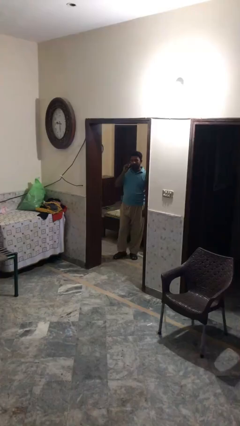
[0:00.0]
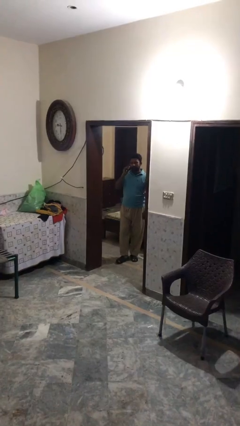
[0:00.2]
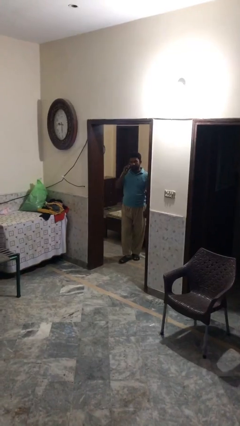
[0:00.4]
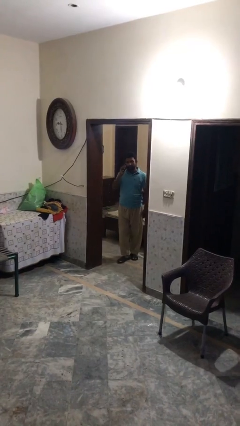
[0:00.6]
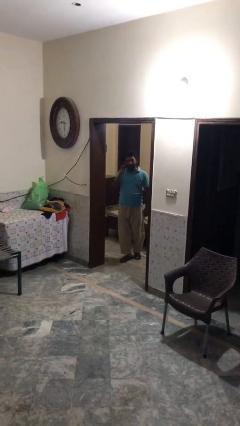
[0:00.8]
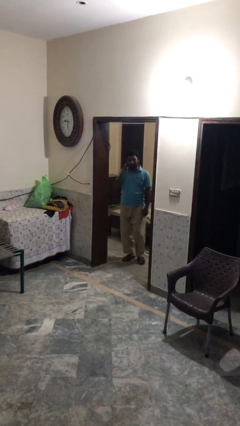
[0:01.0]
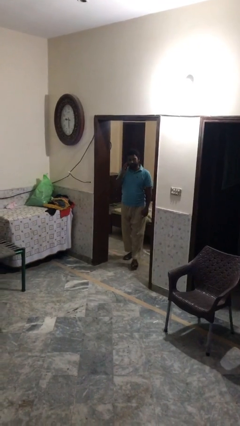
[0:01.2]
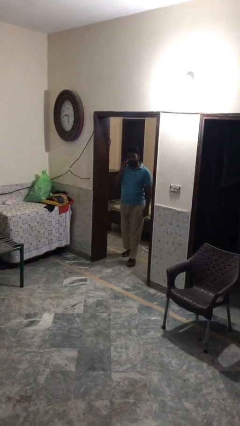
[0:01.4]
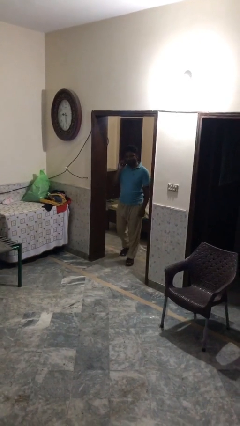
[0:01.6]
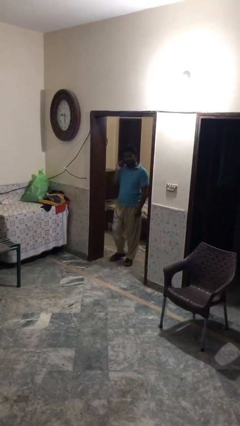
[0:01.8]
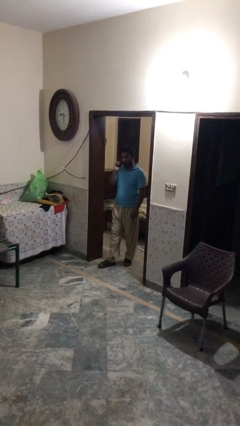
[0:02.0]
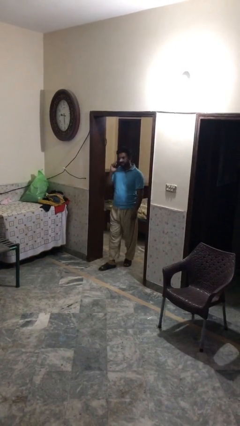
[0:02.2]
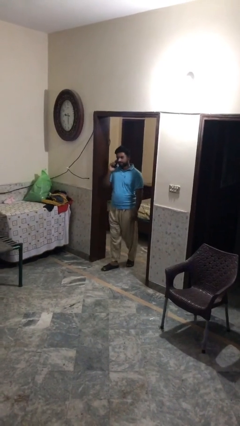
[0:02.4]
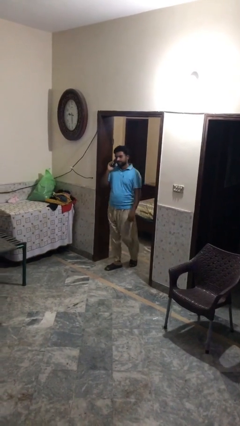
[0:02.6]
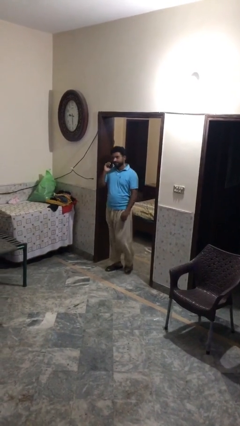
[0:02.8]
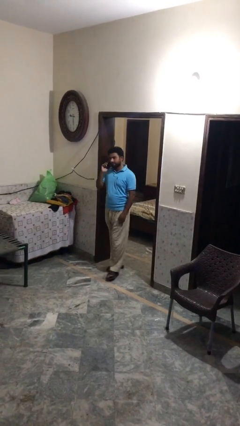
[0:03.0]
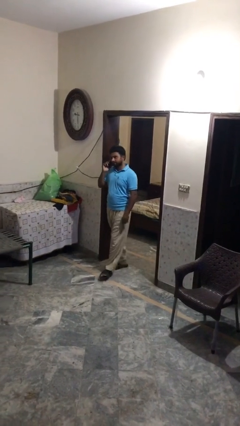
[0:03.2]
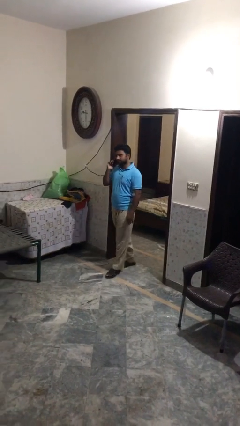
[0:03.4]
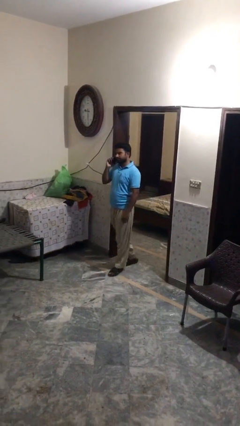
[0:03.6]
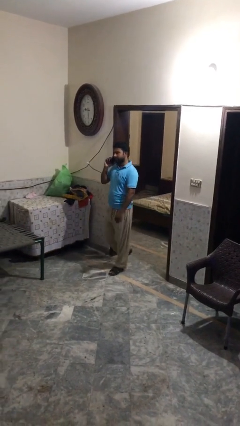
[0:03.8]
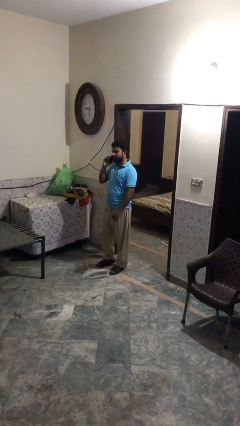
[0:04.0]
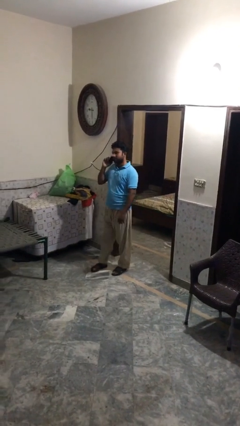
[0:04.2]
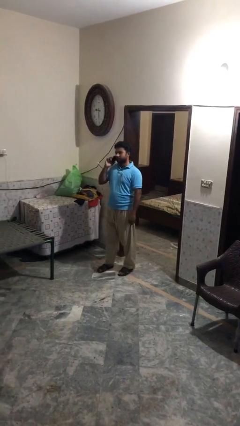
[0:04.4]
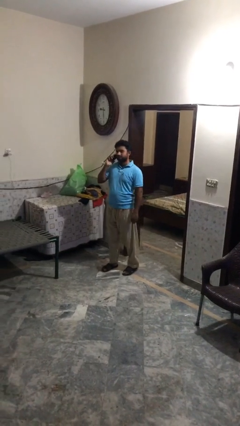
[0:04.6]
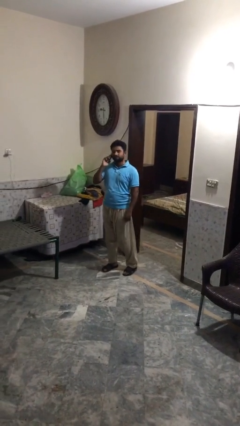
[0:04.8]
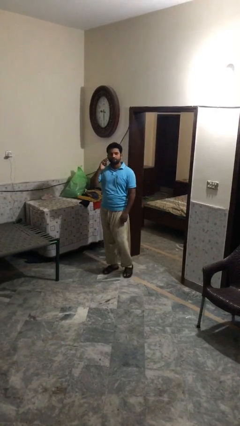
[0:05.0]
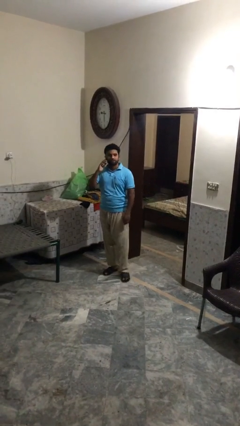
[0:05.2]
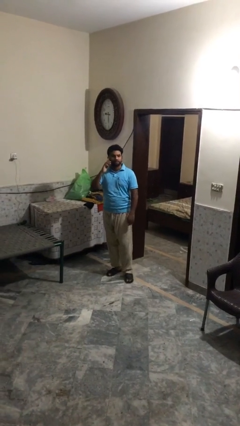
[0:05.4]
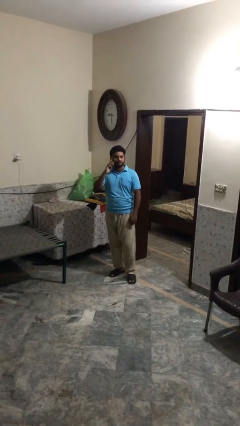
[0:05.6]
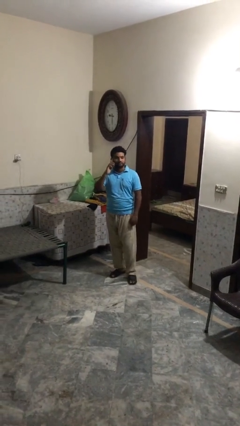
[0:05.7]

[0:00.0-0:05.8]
person enters scene through structure

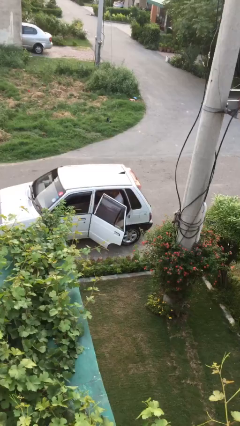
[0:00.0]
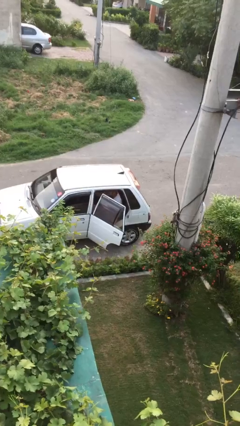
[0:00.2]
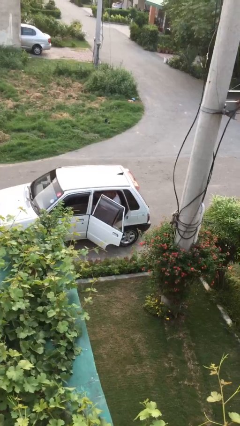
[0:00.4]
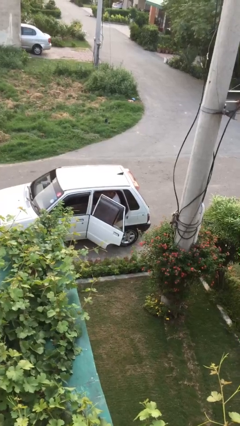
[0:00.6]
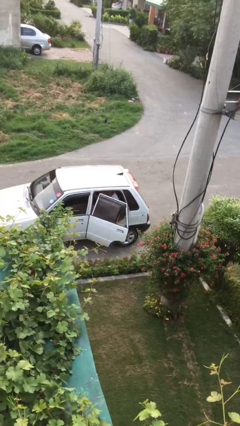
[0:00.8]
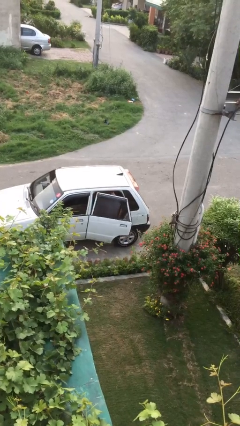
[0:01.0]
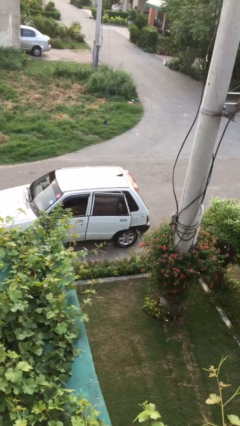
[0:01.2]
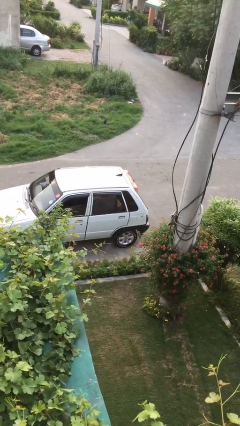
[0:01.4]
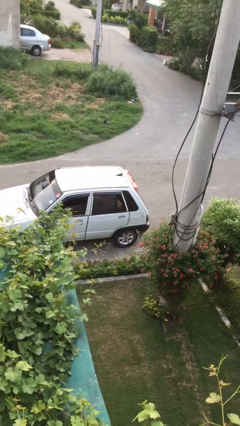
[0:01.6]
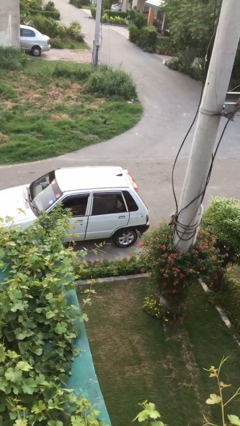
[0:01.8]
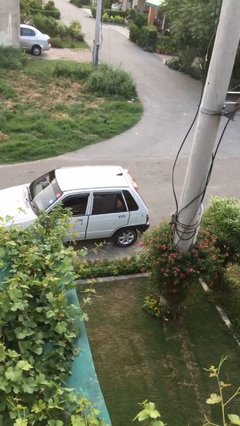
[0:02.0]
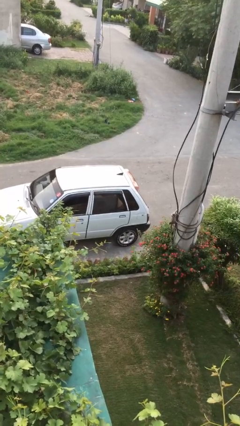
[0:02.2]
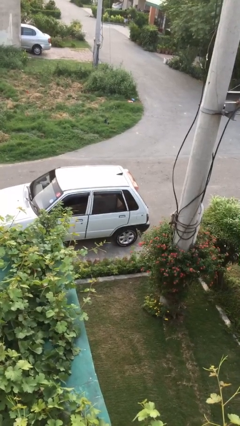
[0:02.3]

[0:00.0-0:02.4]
person closes car door

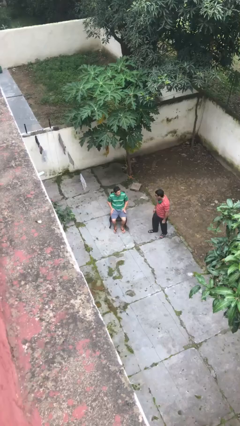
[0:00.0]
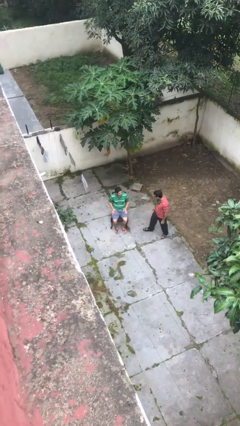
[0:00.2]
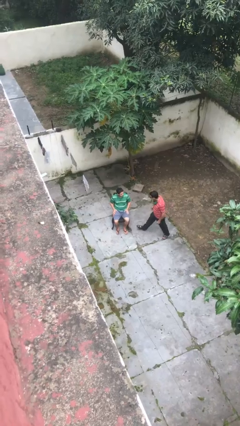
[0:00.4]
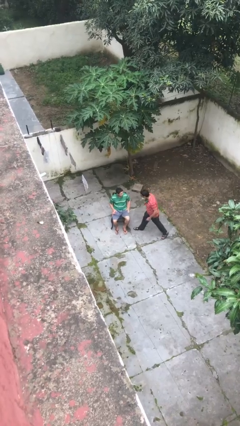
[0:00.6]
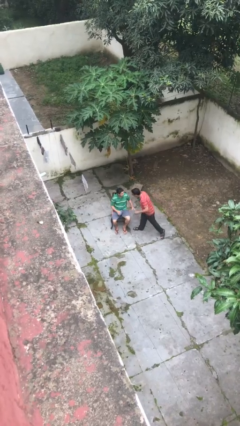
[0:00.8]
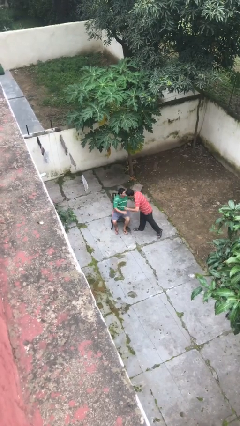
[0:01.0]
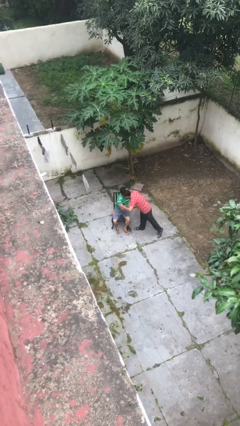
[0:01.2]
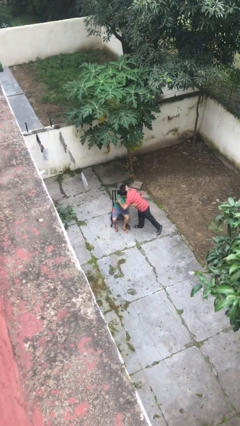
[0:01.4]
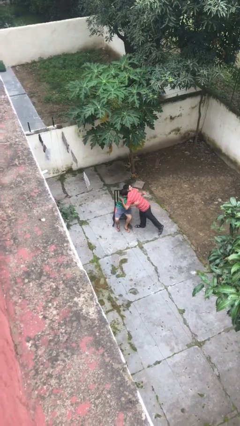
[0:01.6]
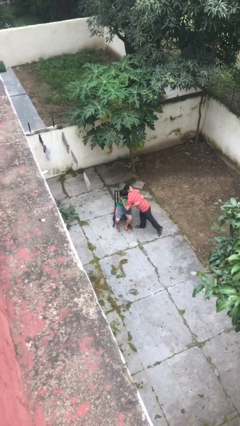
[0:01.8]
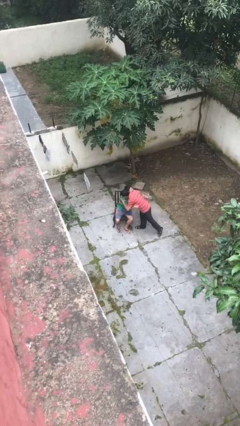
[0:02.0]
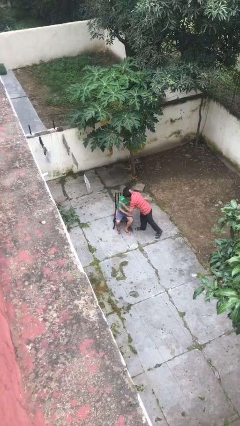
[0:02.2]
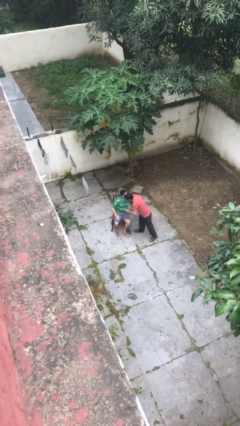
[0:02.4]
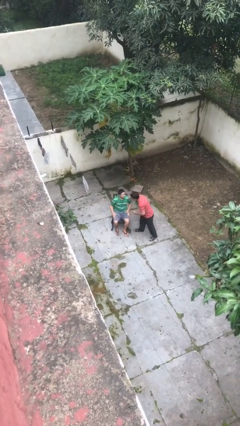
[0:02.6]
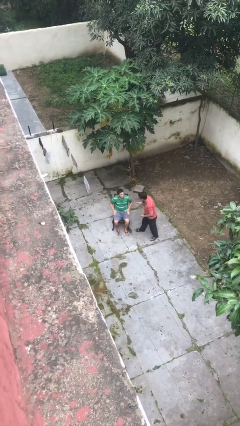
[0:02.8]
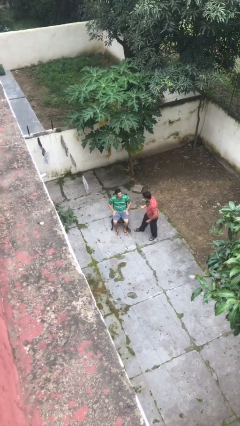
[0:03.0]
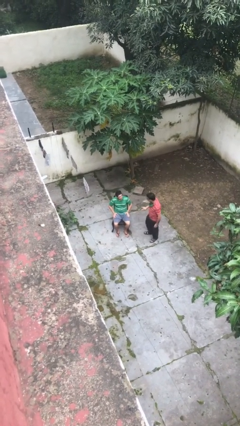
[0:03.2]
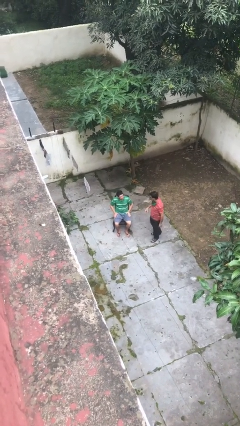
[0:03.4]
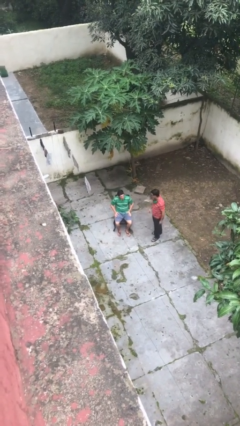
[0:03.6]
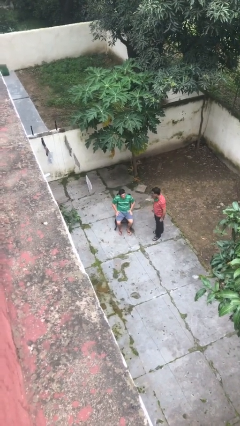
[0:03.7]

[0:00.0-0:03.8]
person embraces person

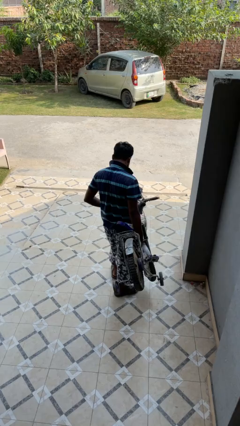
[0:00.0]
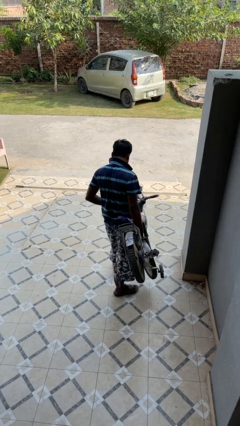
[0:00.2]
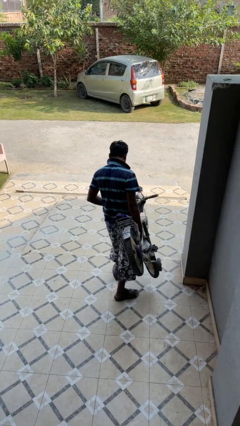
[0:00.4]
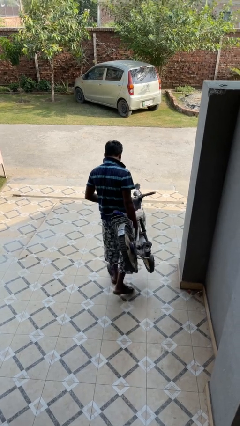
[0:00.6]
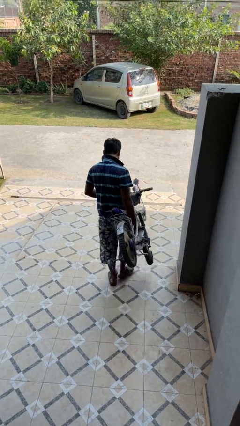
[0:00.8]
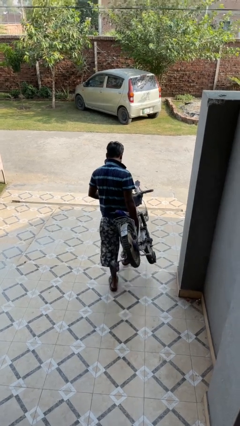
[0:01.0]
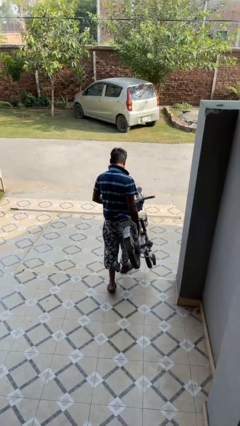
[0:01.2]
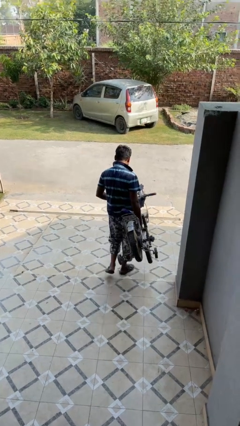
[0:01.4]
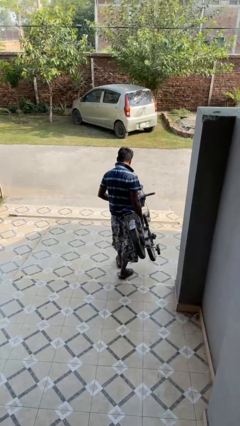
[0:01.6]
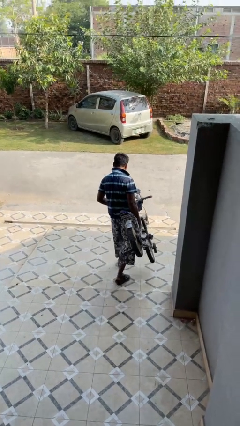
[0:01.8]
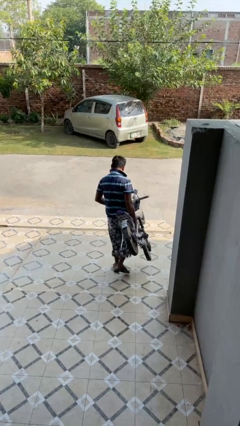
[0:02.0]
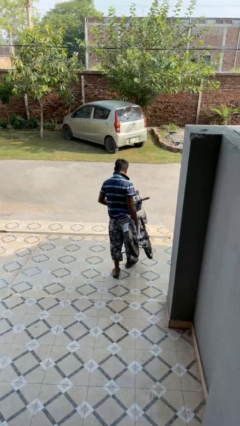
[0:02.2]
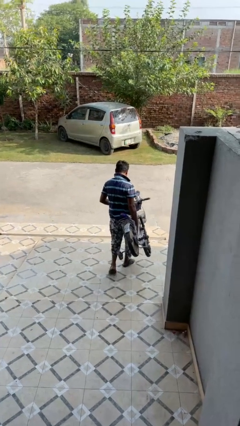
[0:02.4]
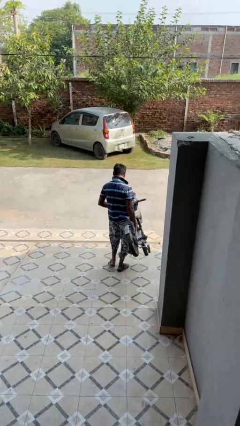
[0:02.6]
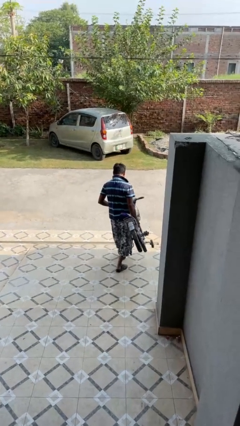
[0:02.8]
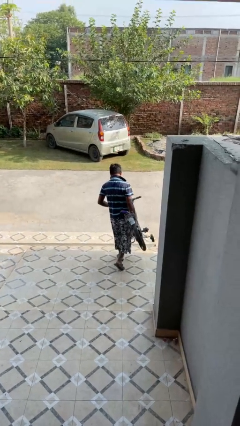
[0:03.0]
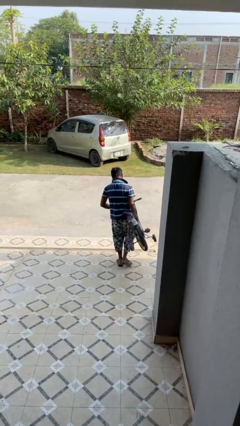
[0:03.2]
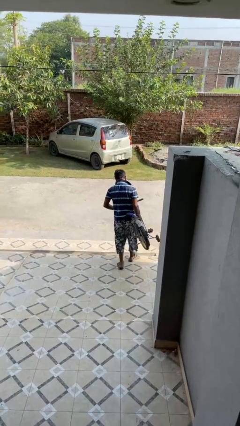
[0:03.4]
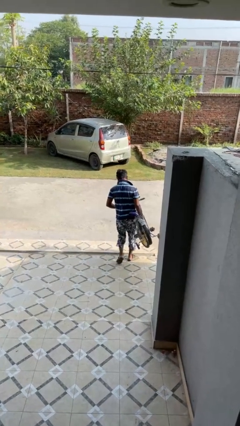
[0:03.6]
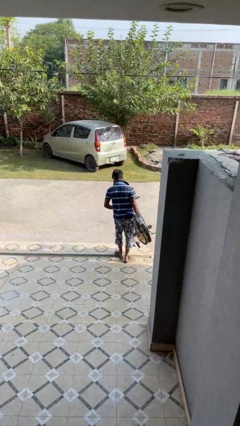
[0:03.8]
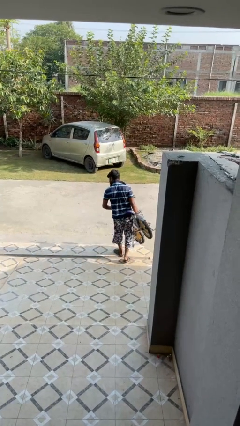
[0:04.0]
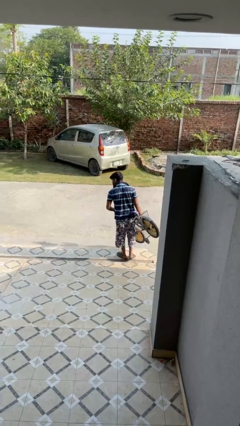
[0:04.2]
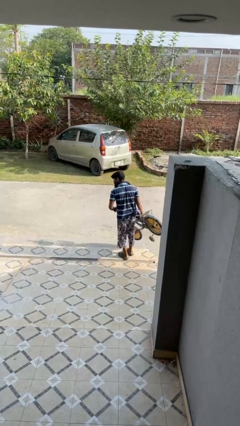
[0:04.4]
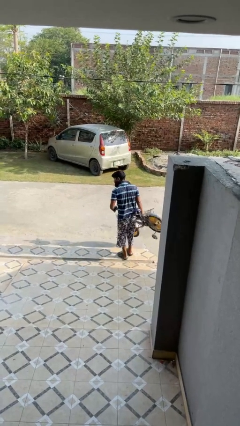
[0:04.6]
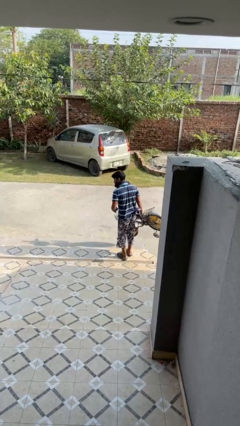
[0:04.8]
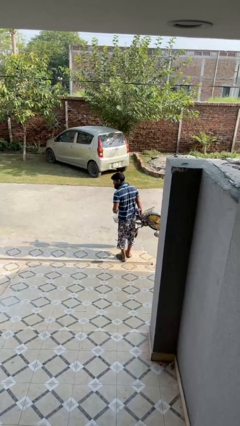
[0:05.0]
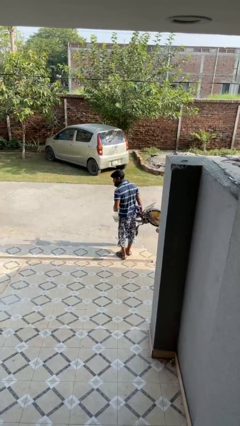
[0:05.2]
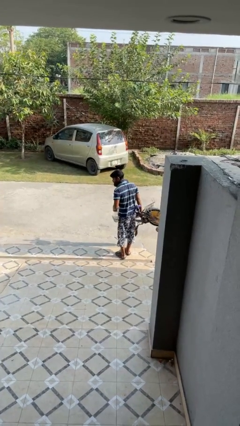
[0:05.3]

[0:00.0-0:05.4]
person carries bicycle

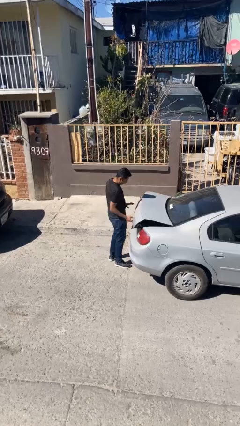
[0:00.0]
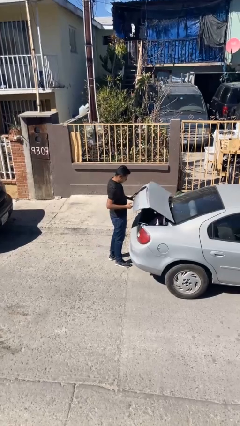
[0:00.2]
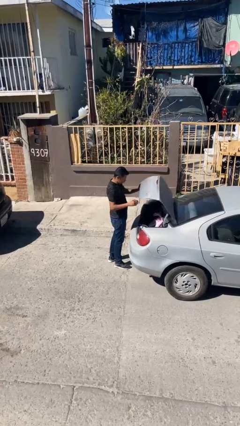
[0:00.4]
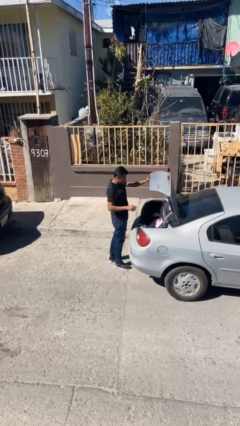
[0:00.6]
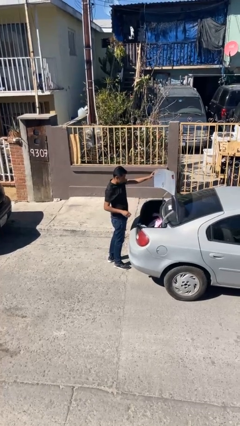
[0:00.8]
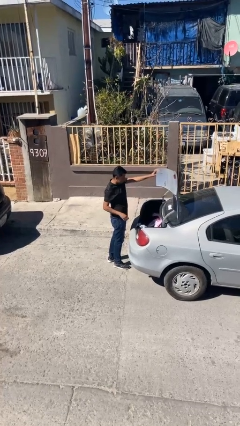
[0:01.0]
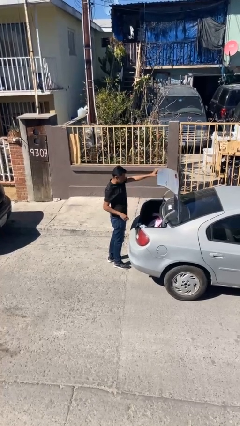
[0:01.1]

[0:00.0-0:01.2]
person opens car trunk
